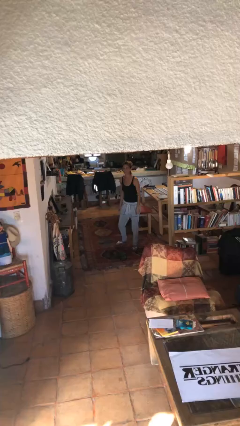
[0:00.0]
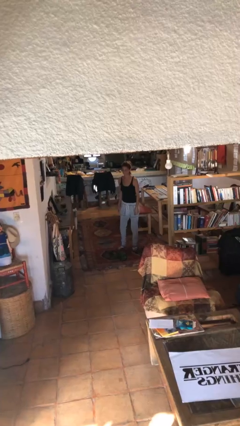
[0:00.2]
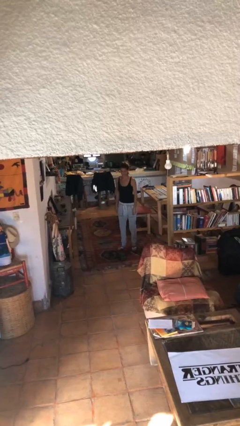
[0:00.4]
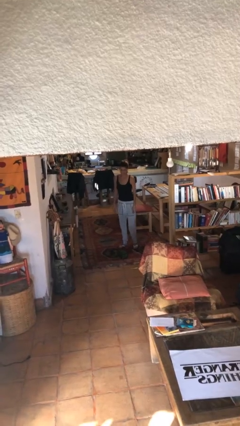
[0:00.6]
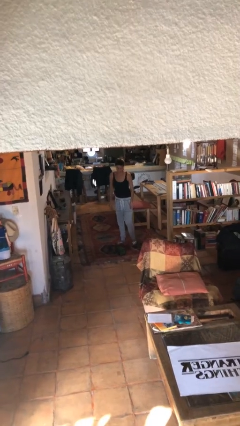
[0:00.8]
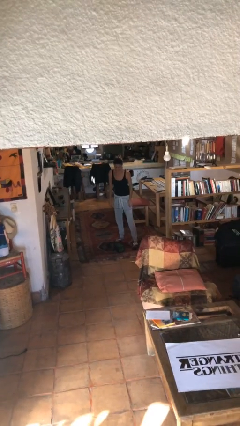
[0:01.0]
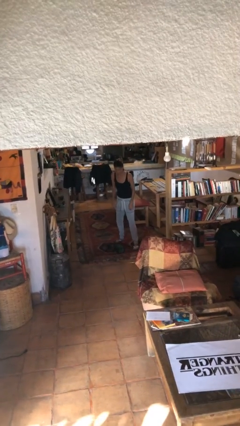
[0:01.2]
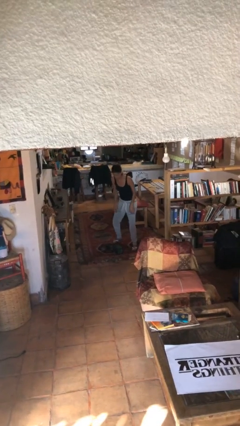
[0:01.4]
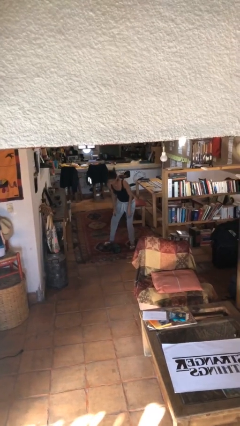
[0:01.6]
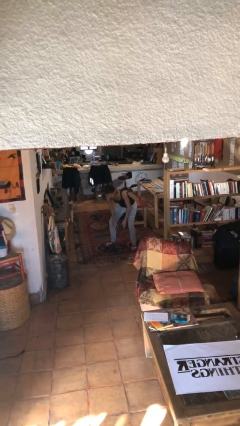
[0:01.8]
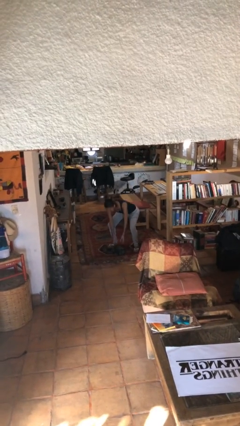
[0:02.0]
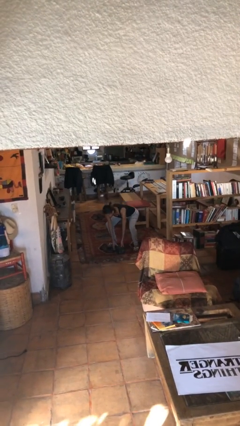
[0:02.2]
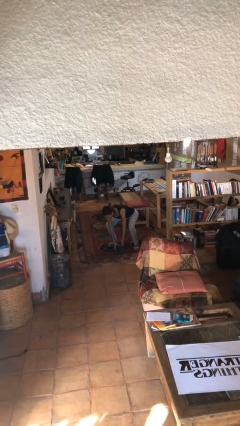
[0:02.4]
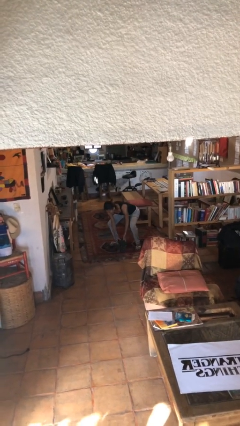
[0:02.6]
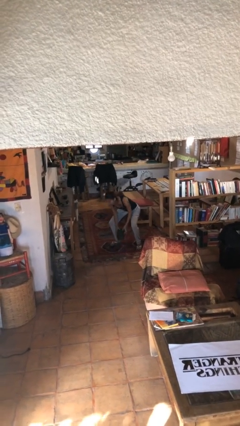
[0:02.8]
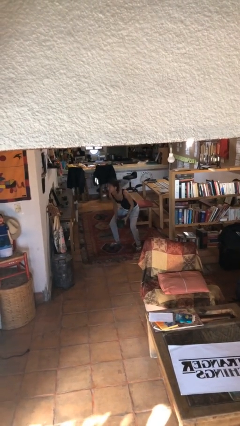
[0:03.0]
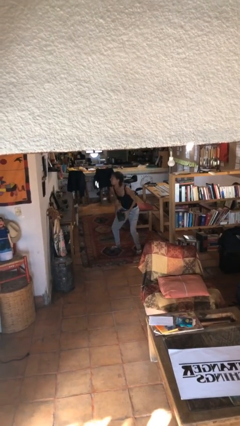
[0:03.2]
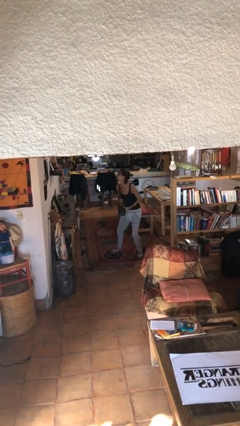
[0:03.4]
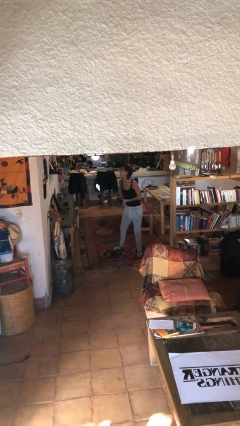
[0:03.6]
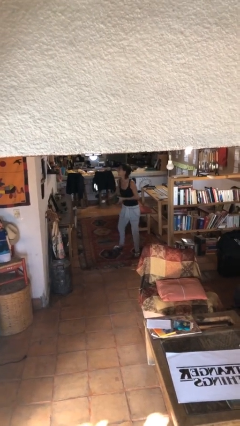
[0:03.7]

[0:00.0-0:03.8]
person picks up object from floor

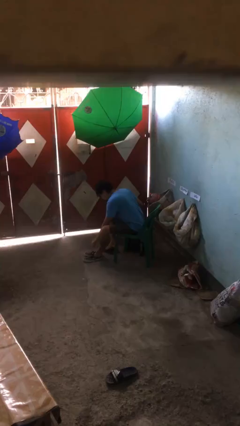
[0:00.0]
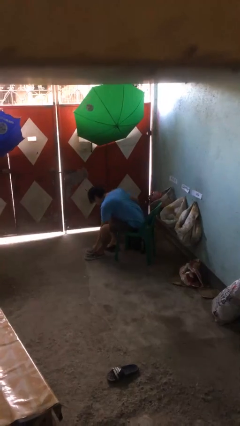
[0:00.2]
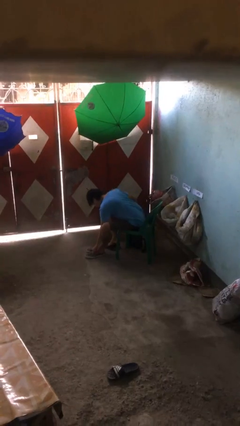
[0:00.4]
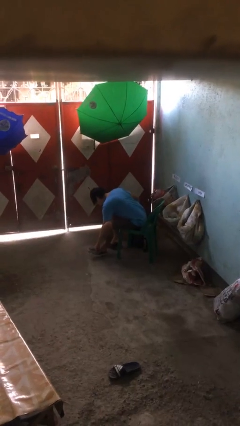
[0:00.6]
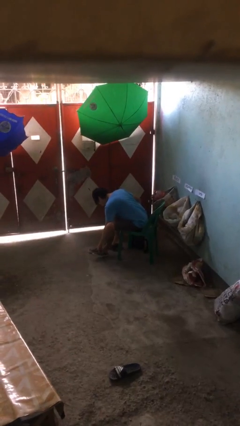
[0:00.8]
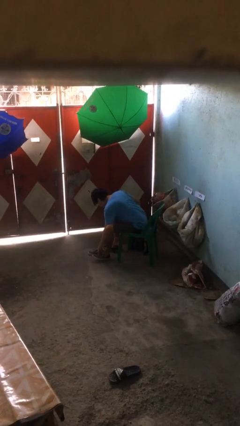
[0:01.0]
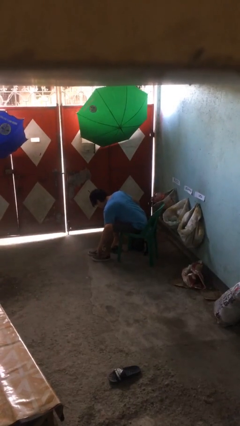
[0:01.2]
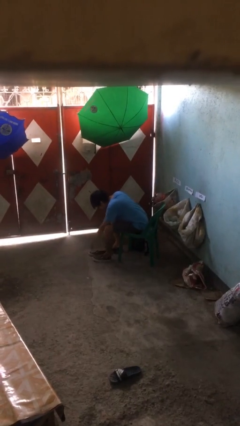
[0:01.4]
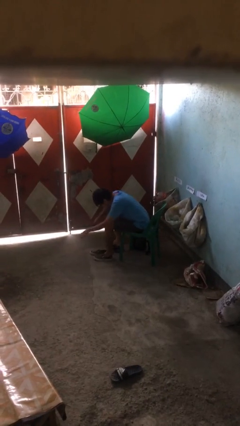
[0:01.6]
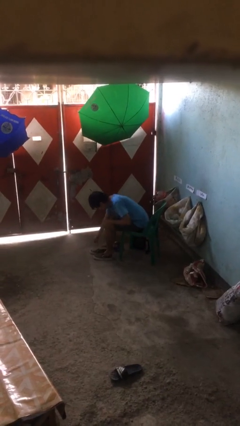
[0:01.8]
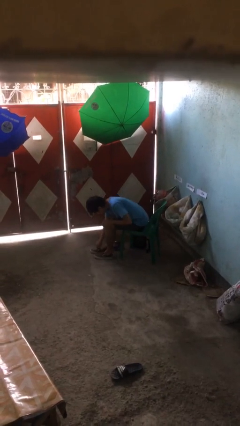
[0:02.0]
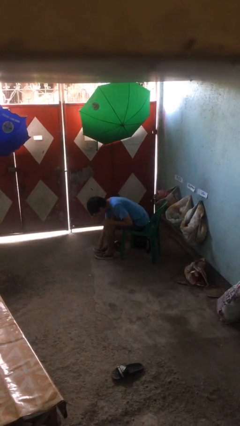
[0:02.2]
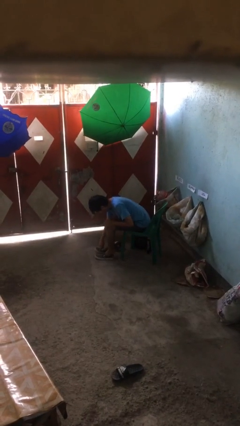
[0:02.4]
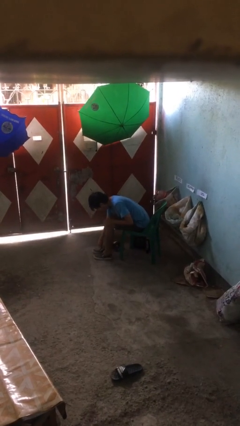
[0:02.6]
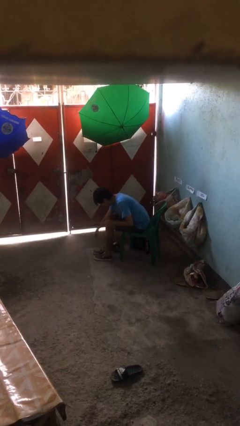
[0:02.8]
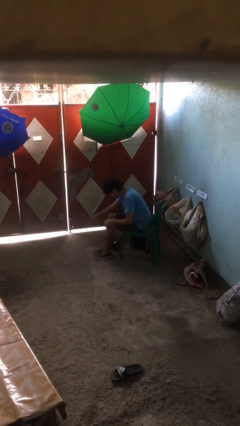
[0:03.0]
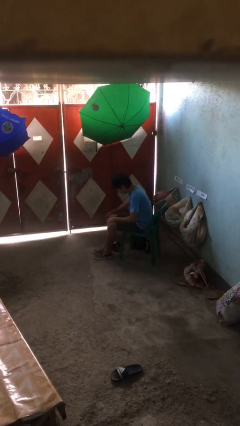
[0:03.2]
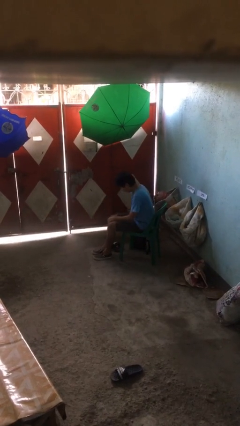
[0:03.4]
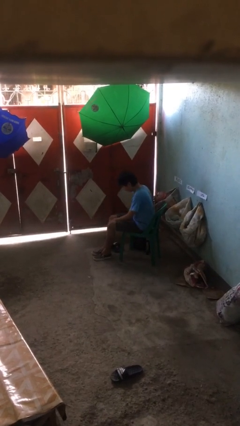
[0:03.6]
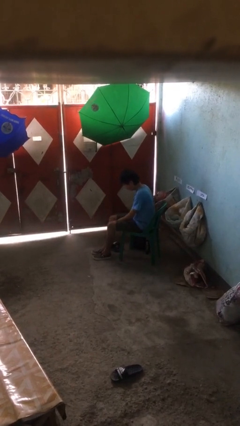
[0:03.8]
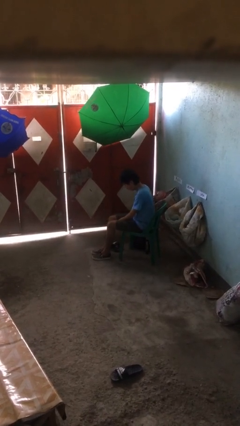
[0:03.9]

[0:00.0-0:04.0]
person puts on shoes

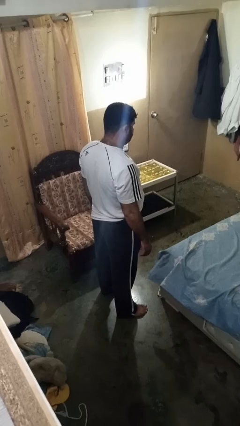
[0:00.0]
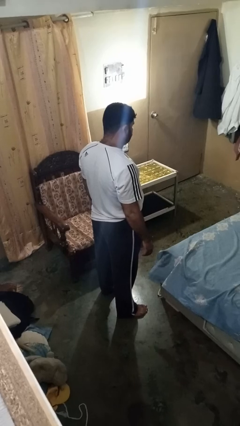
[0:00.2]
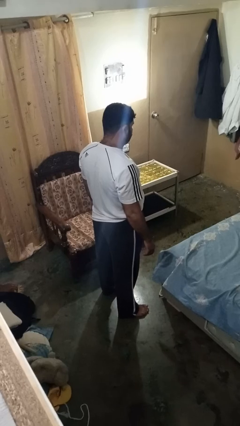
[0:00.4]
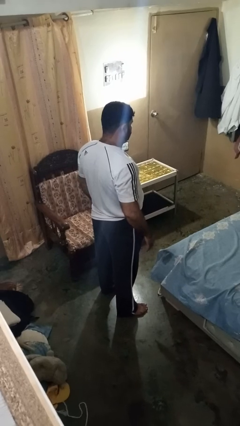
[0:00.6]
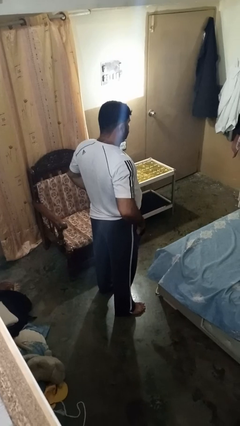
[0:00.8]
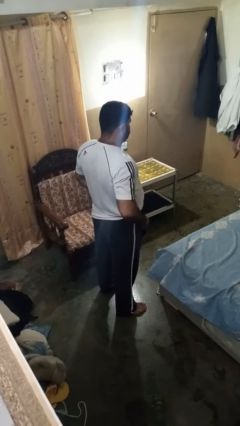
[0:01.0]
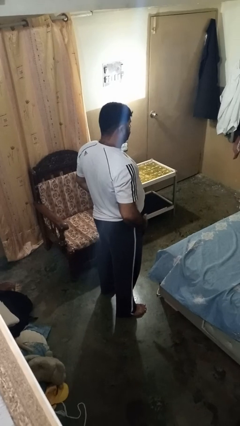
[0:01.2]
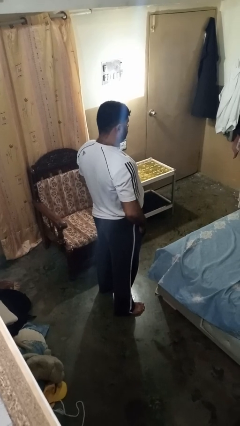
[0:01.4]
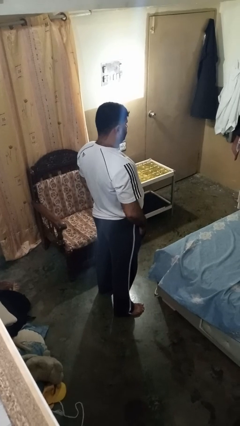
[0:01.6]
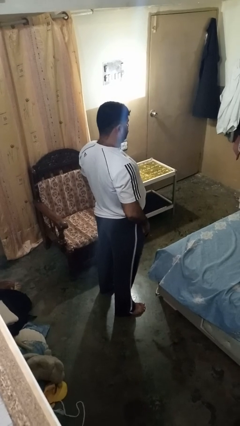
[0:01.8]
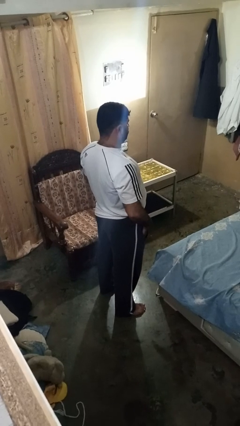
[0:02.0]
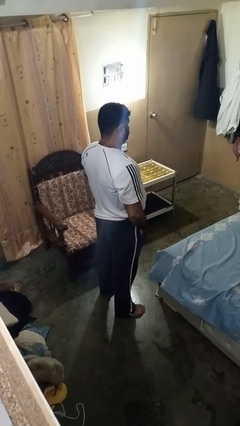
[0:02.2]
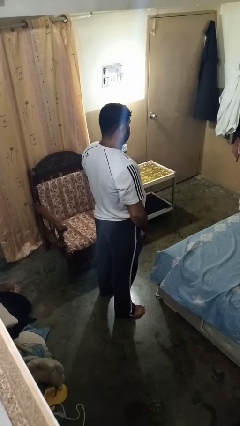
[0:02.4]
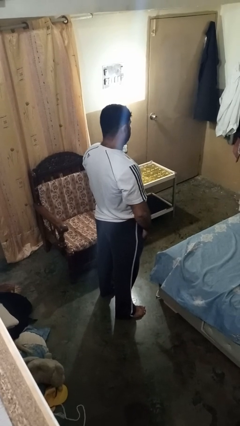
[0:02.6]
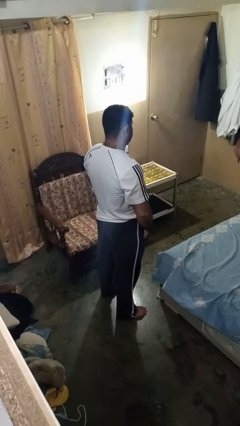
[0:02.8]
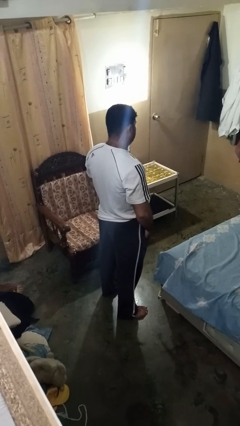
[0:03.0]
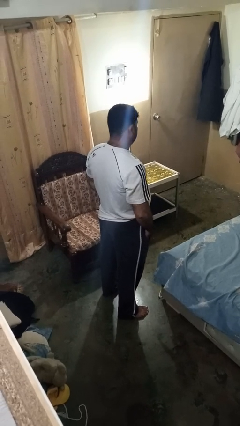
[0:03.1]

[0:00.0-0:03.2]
person puts hands in back pockets

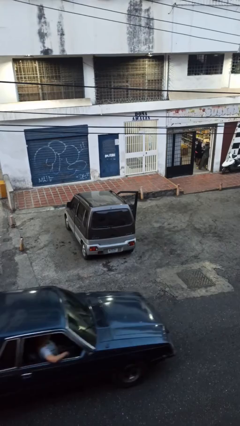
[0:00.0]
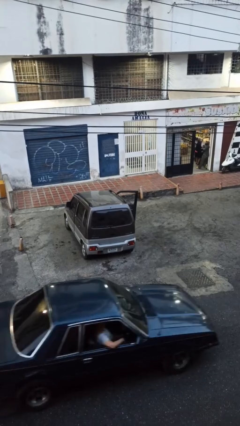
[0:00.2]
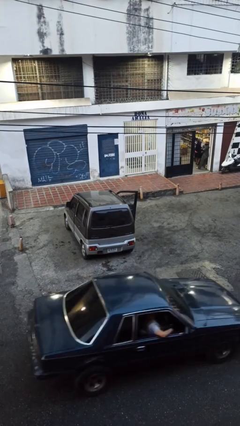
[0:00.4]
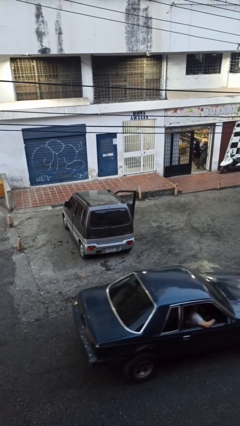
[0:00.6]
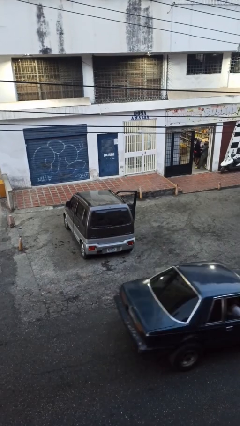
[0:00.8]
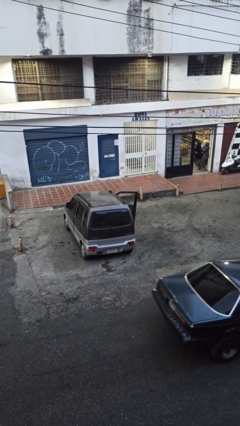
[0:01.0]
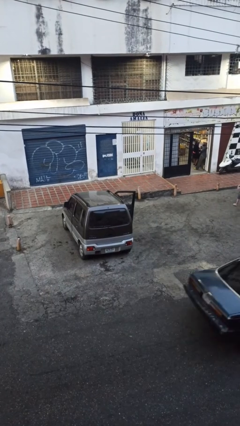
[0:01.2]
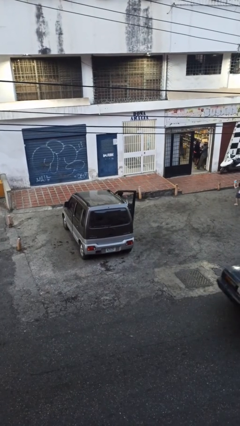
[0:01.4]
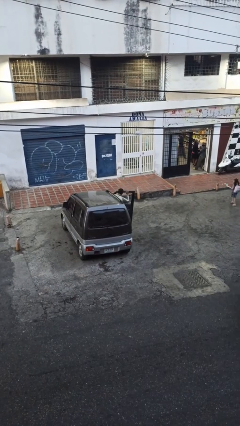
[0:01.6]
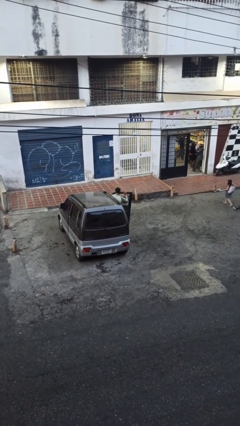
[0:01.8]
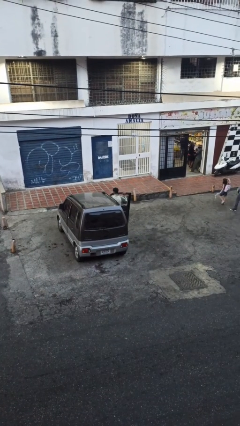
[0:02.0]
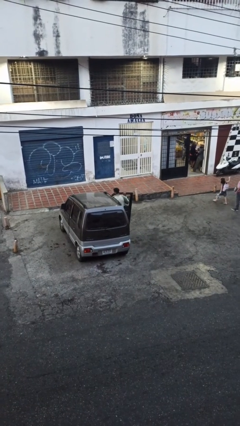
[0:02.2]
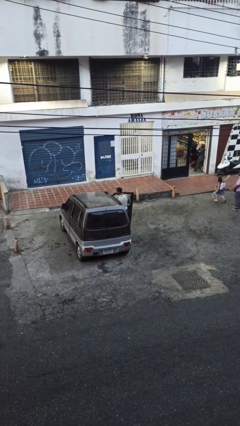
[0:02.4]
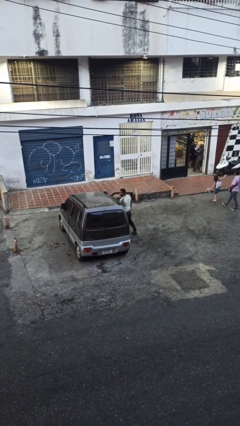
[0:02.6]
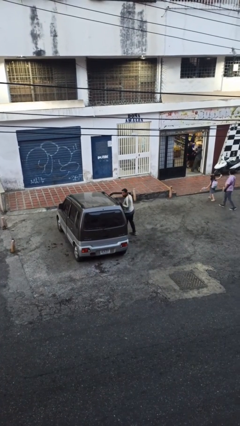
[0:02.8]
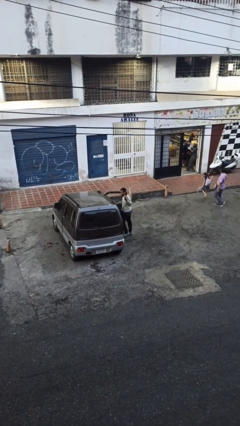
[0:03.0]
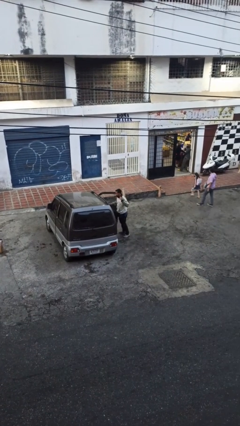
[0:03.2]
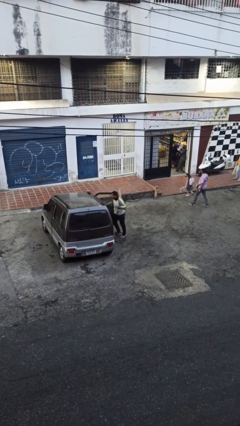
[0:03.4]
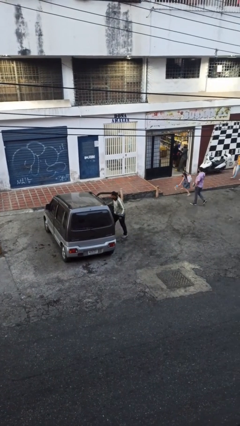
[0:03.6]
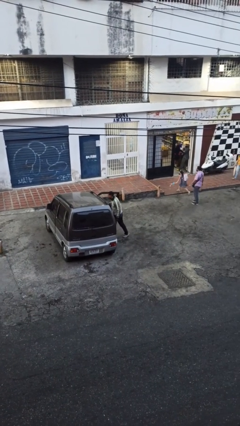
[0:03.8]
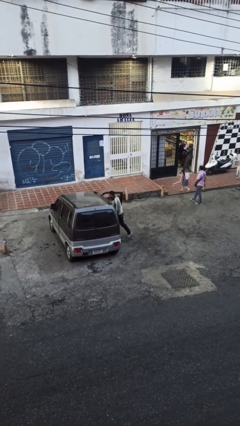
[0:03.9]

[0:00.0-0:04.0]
person exits car

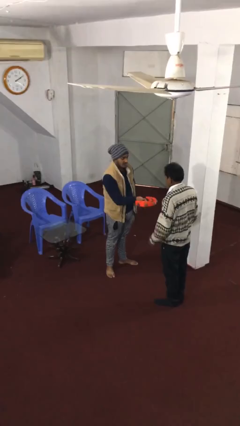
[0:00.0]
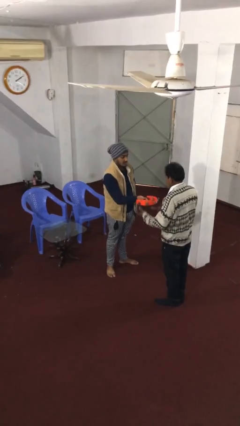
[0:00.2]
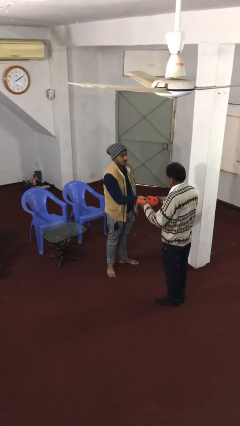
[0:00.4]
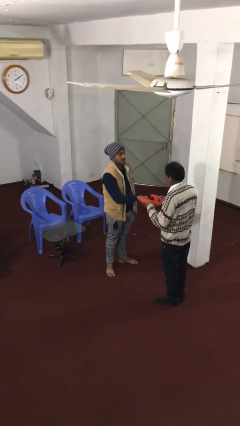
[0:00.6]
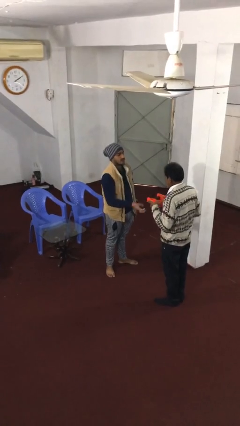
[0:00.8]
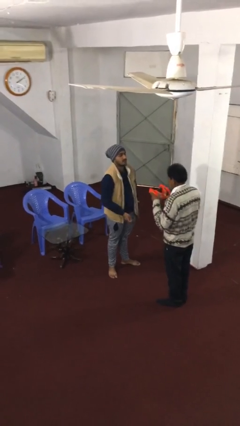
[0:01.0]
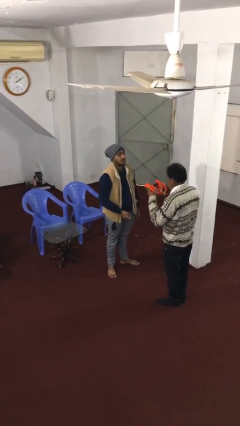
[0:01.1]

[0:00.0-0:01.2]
person transfers object to person

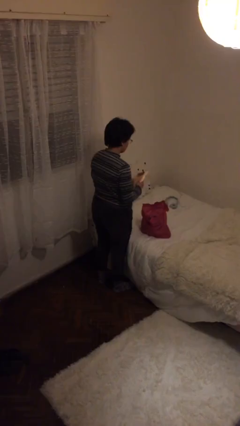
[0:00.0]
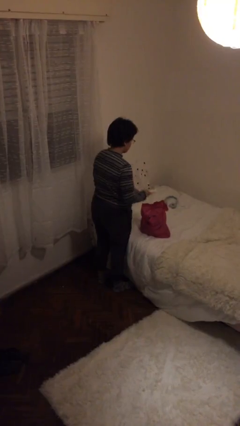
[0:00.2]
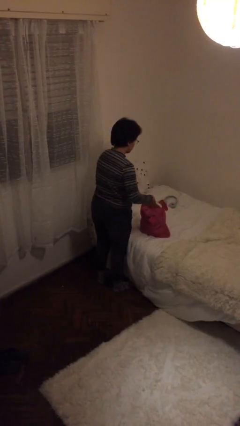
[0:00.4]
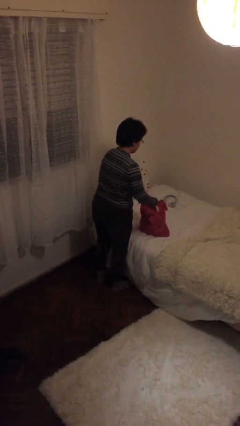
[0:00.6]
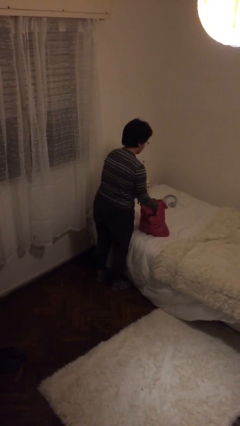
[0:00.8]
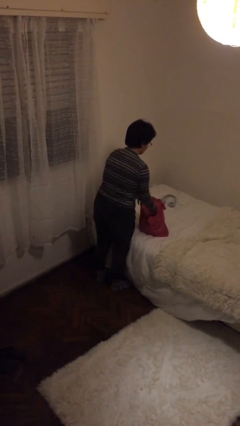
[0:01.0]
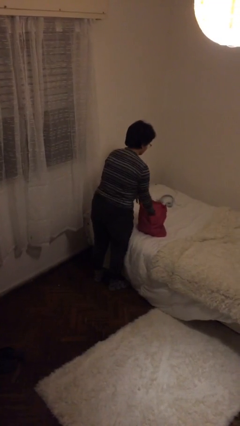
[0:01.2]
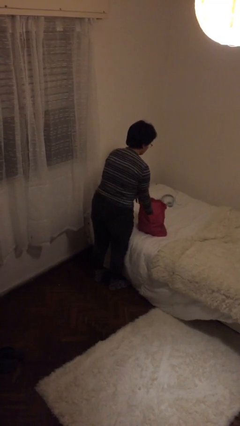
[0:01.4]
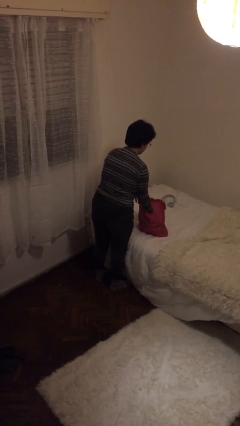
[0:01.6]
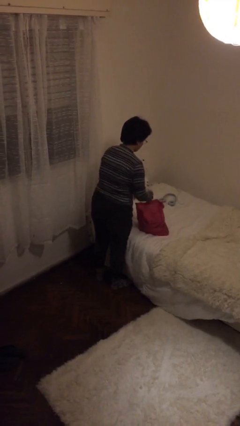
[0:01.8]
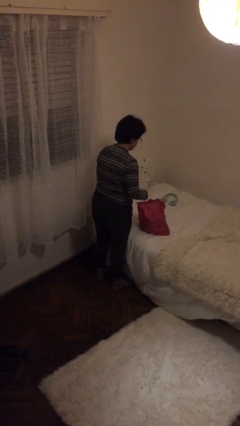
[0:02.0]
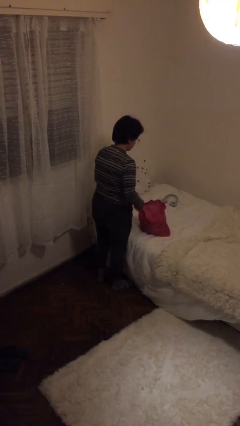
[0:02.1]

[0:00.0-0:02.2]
person puts object into bag
